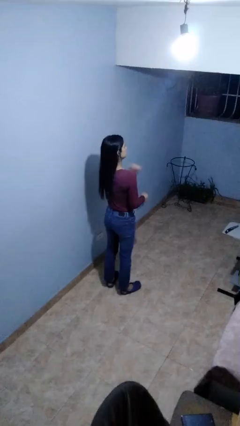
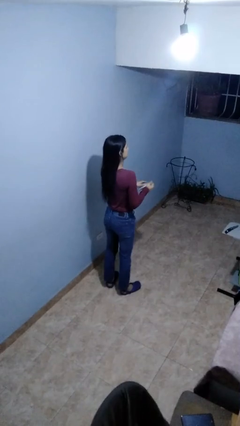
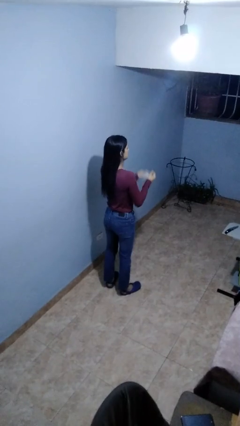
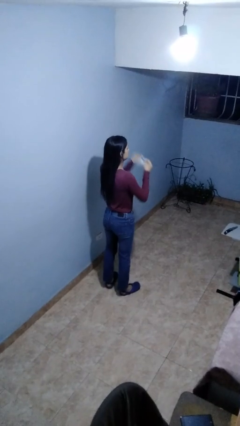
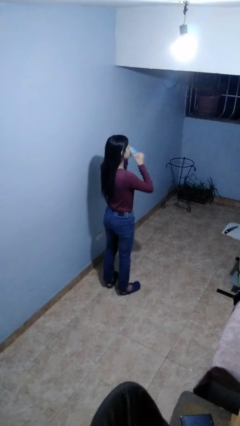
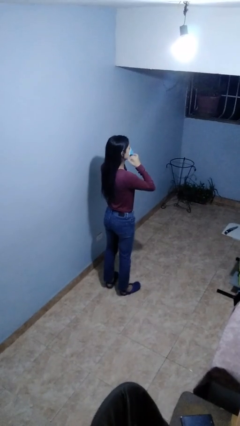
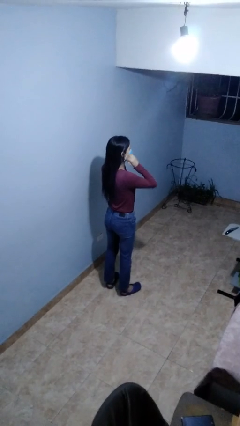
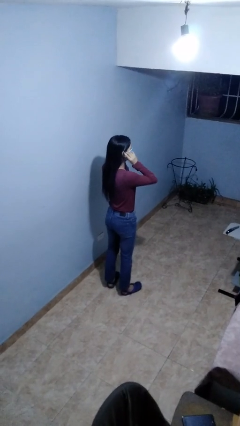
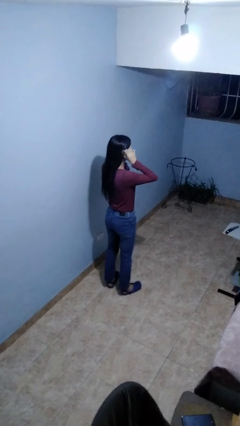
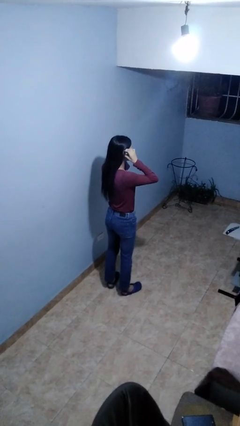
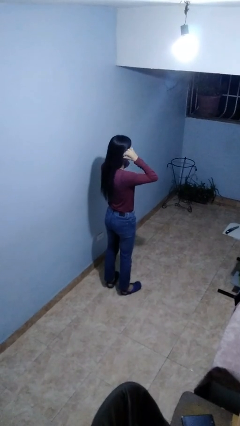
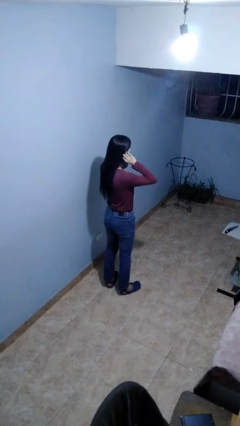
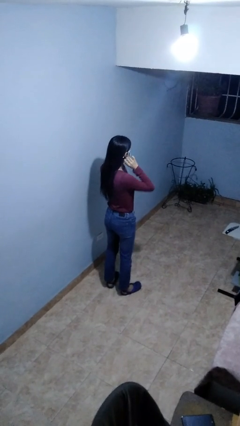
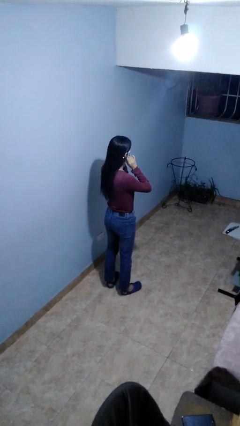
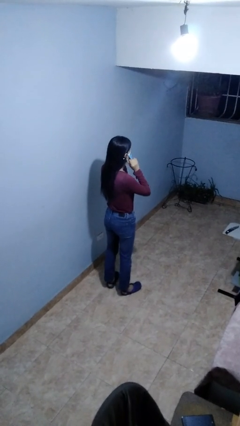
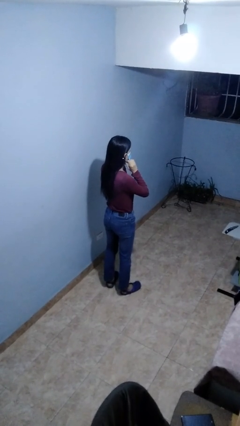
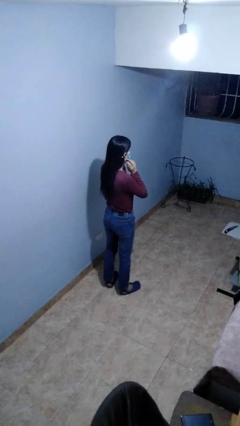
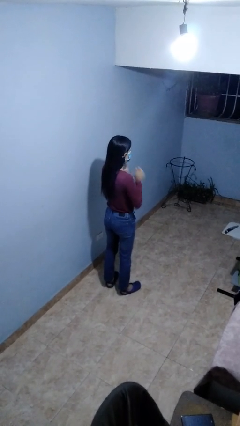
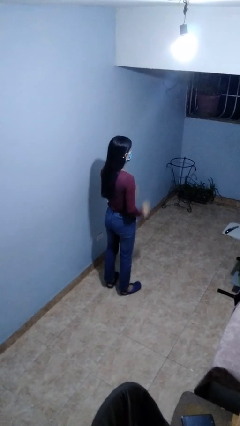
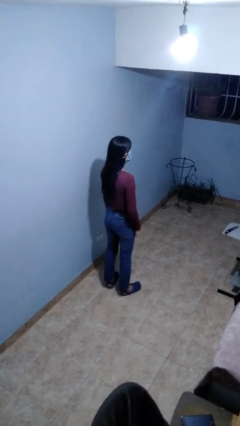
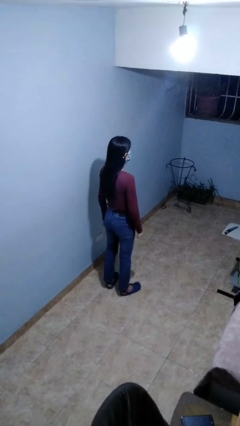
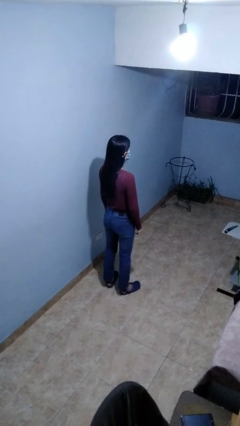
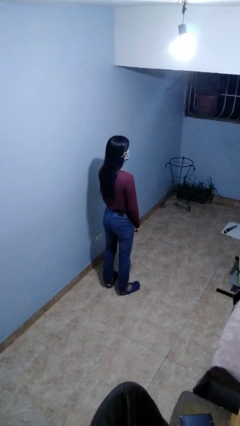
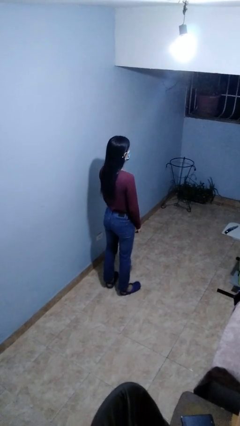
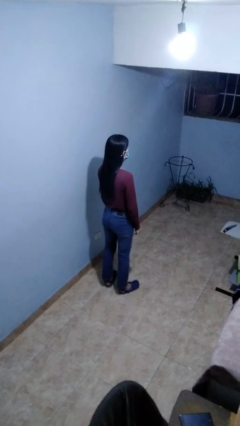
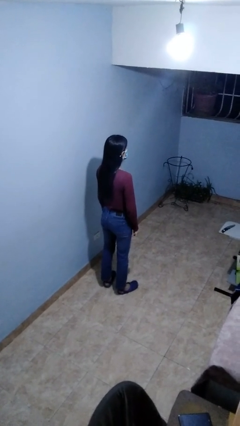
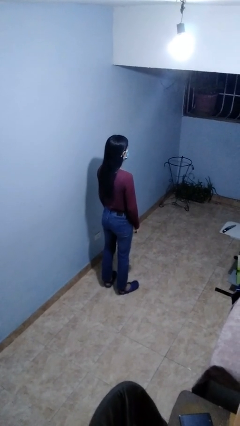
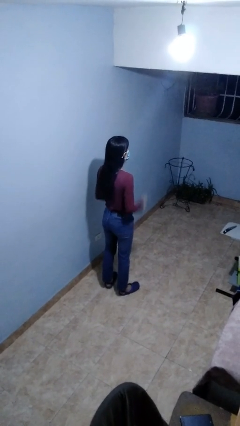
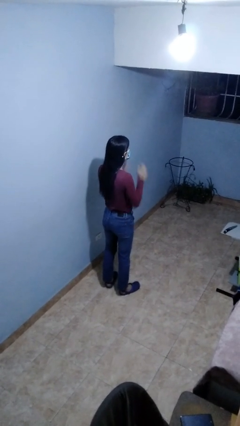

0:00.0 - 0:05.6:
person puts on facemask

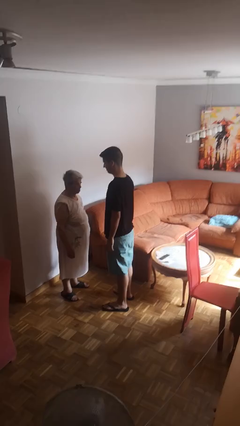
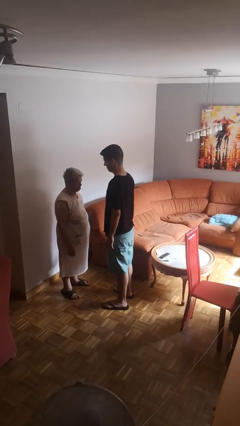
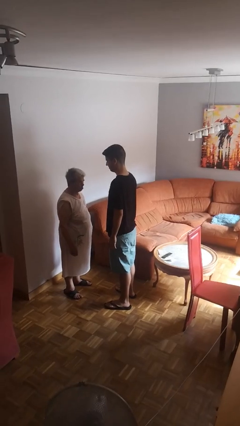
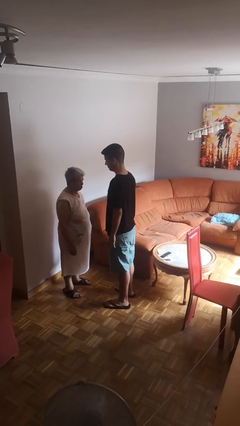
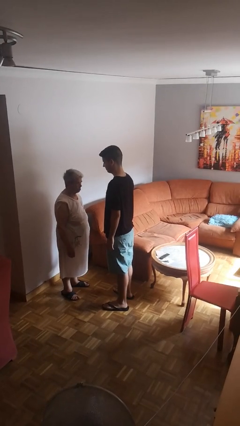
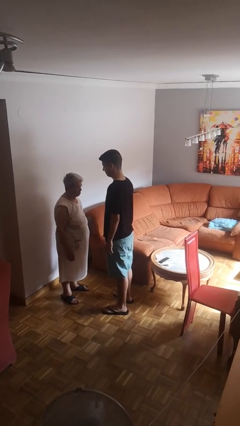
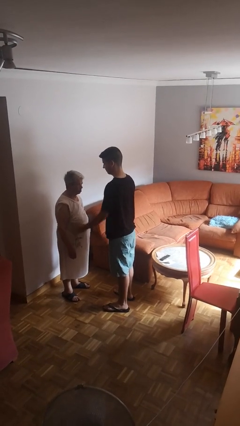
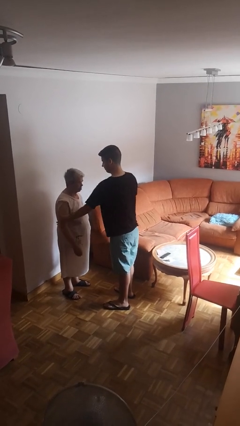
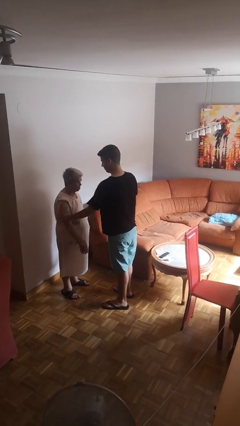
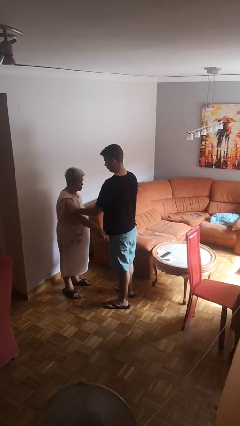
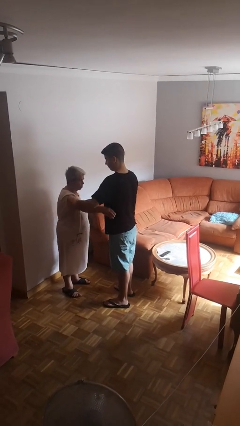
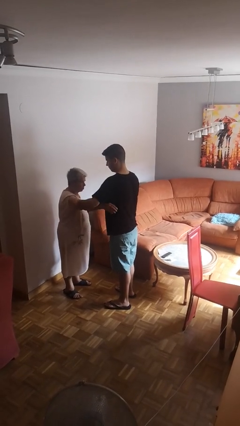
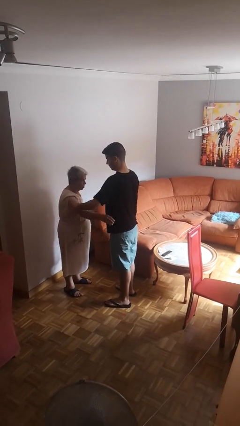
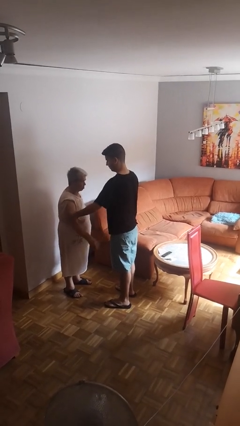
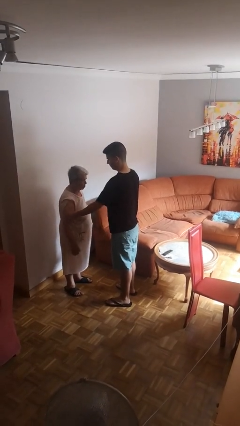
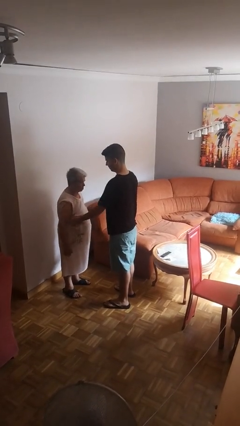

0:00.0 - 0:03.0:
person grabs person by bicep

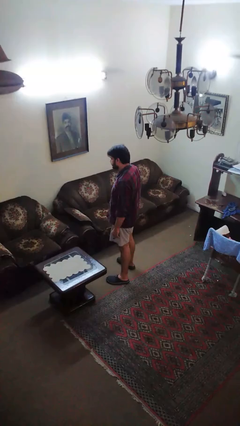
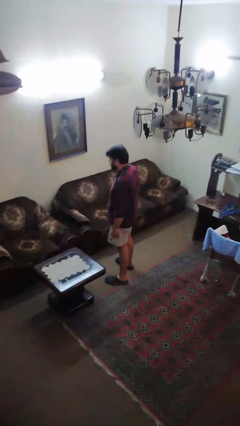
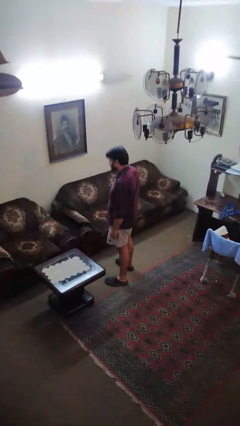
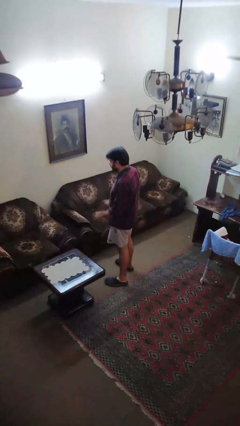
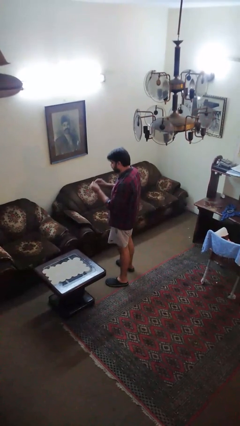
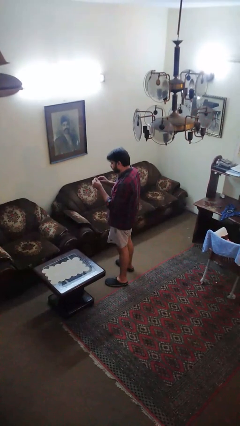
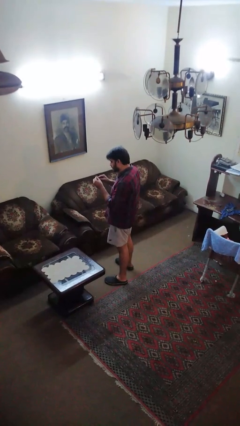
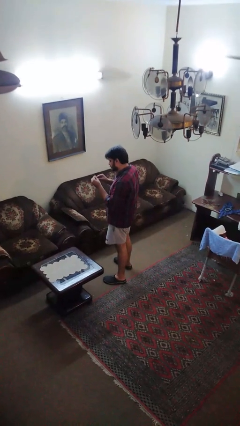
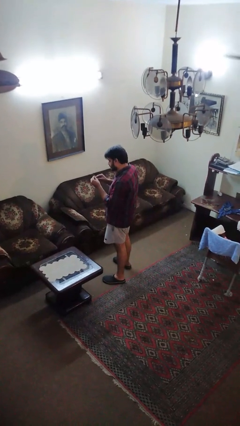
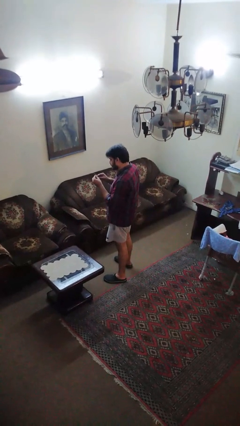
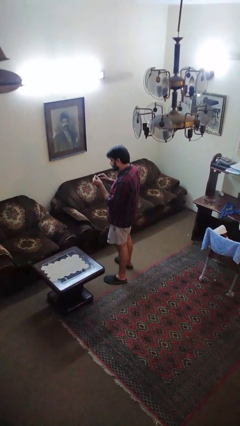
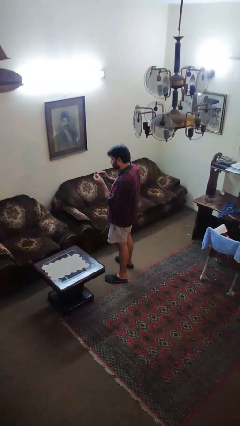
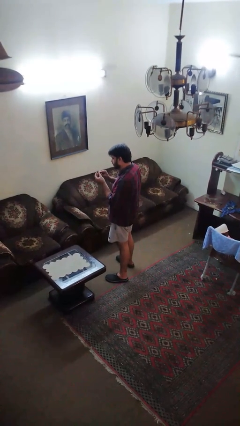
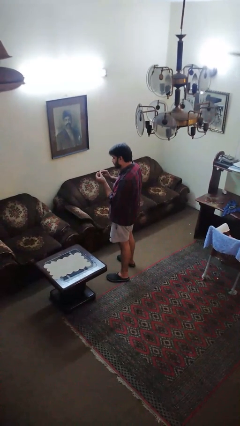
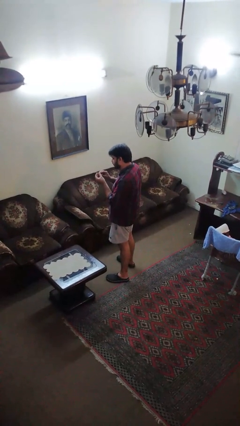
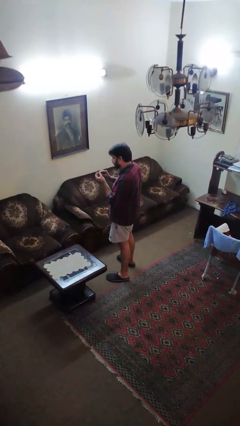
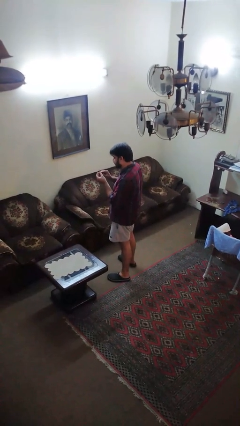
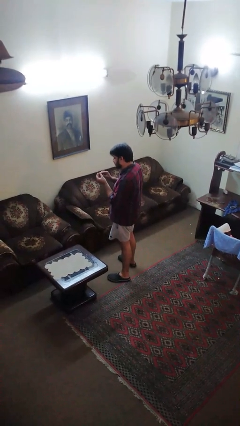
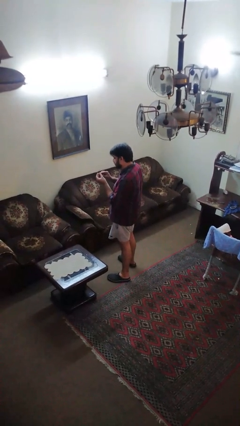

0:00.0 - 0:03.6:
person files fingernails

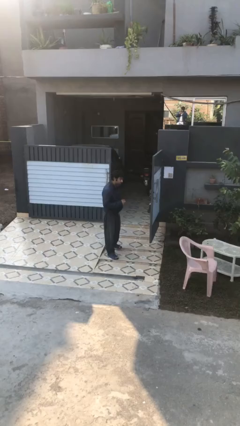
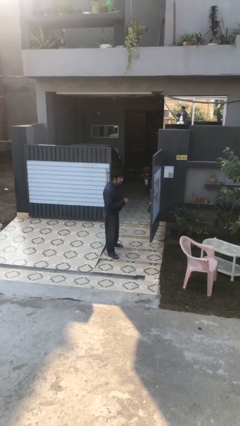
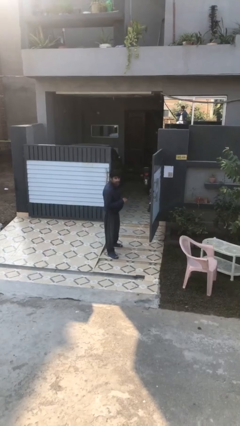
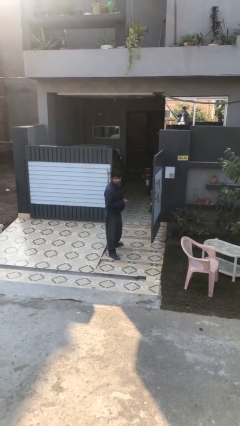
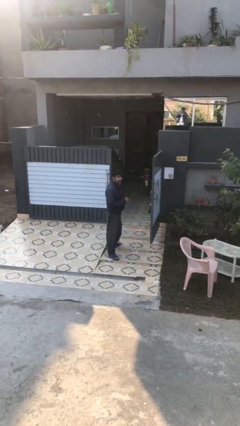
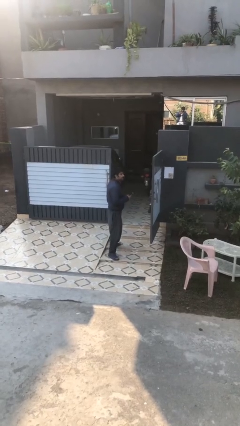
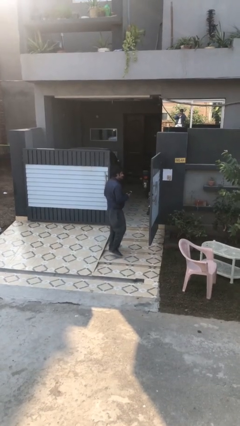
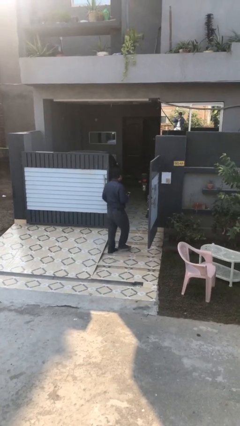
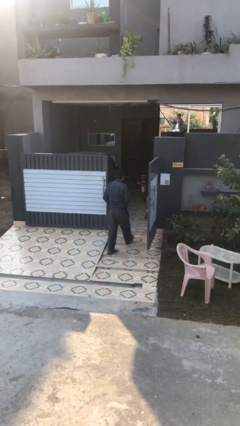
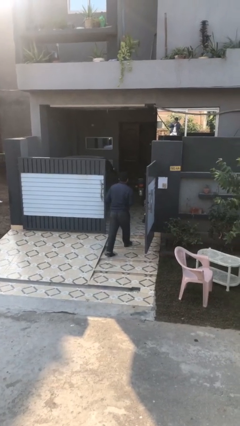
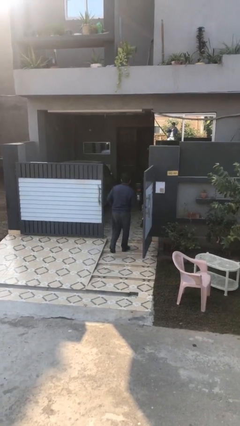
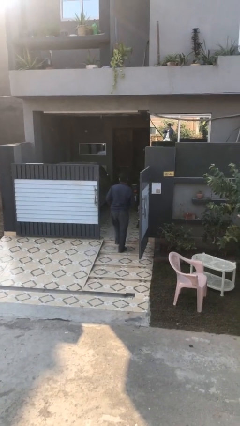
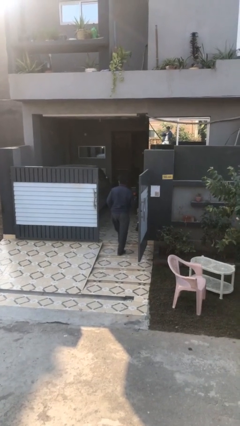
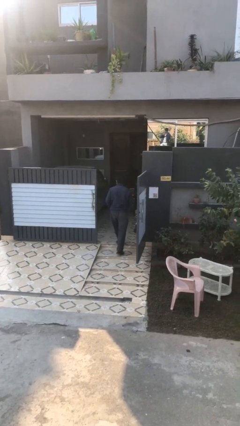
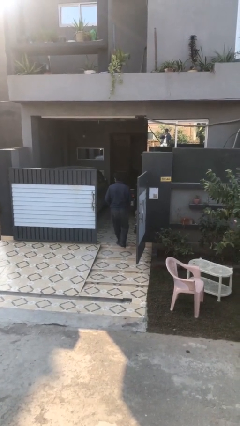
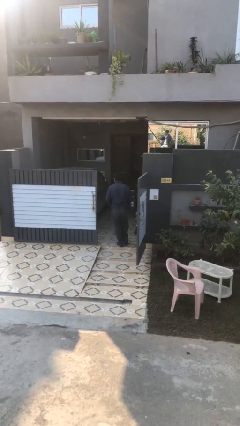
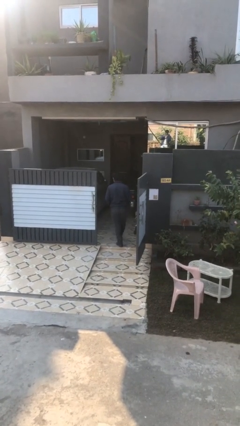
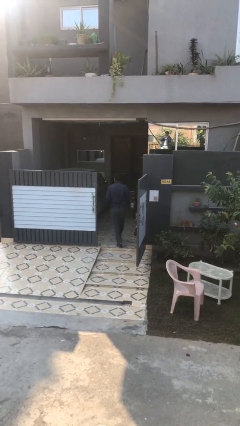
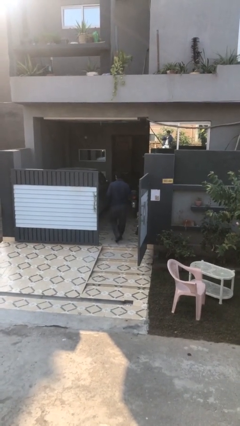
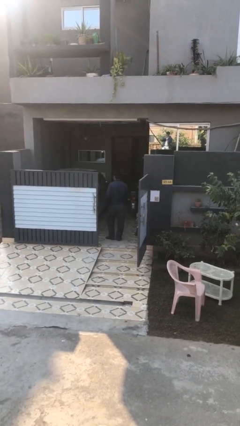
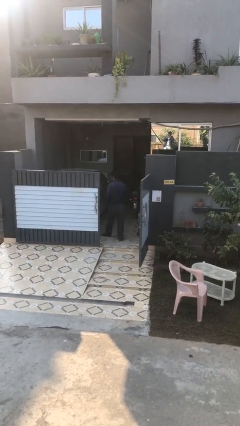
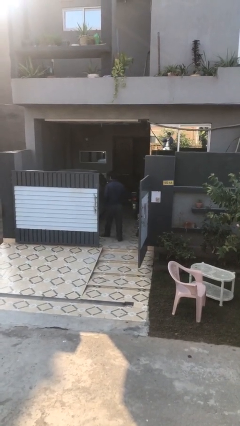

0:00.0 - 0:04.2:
person exits scene through structure

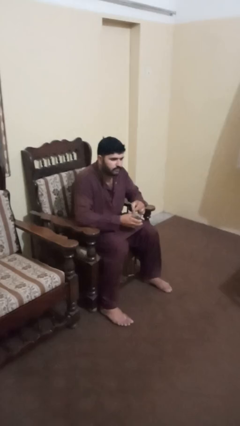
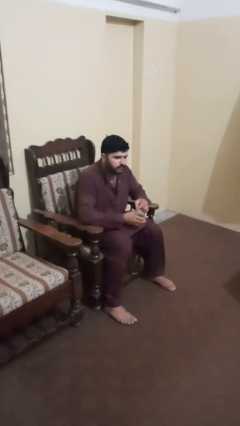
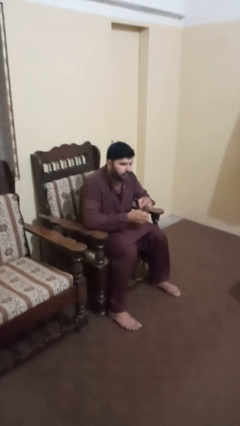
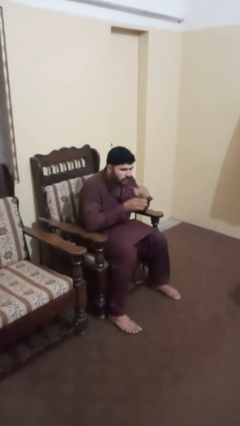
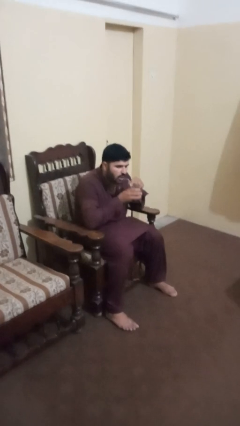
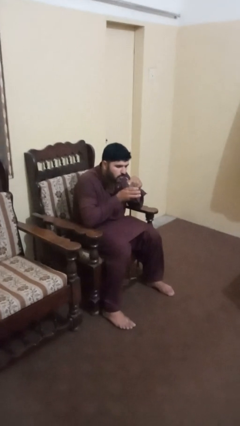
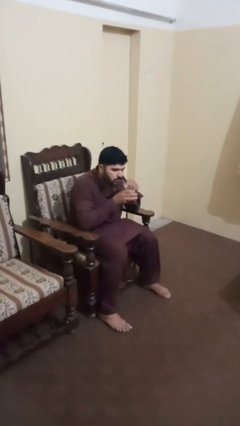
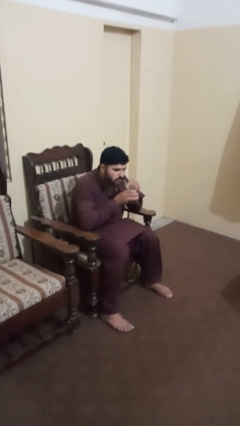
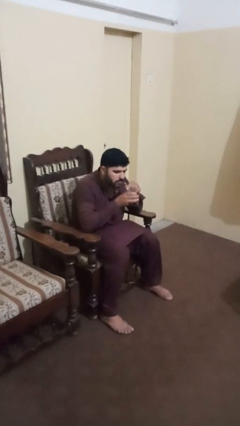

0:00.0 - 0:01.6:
person drinks from straw
